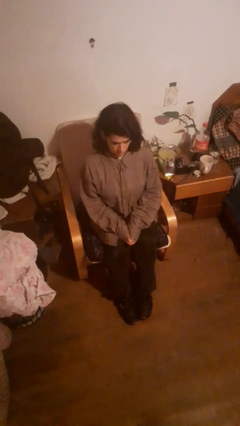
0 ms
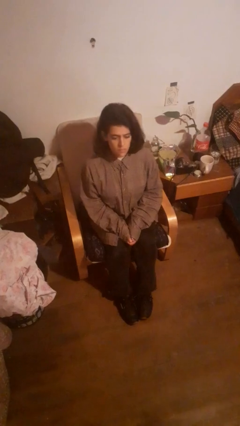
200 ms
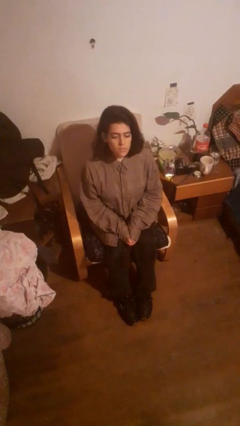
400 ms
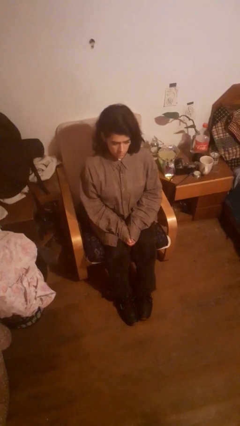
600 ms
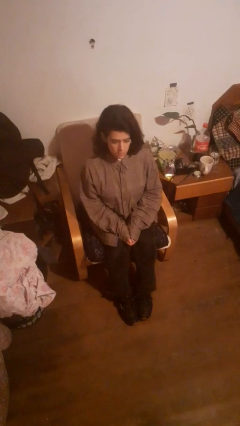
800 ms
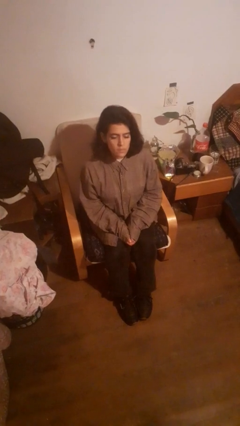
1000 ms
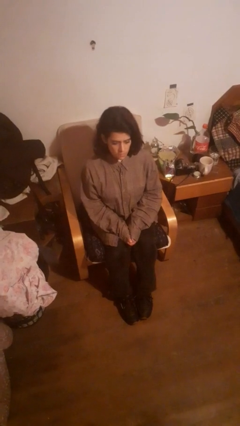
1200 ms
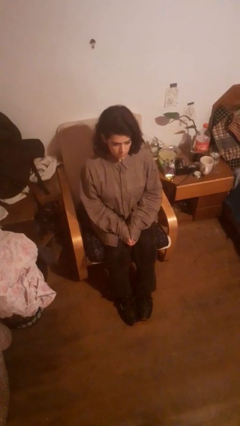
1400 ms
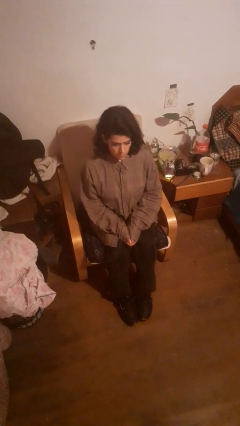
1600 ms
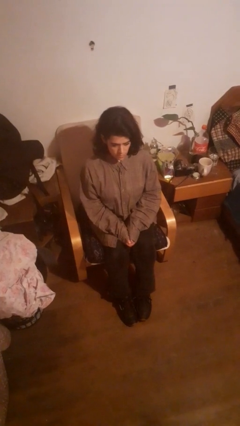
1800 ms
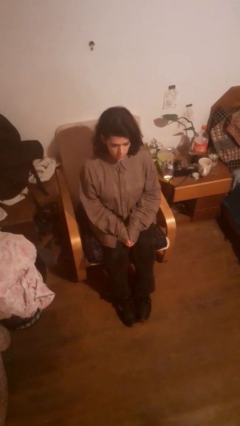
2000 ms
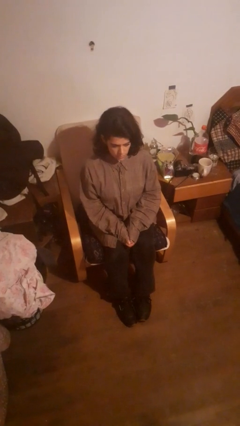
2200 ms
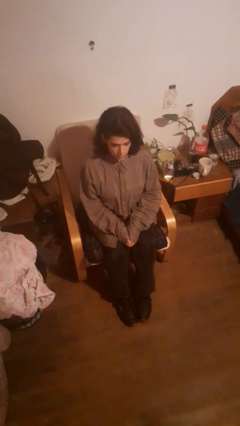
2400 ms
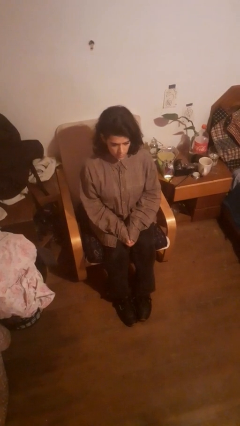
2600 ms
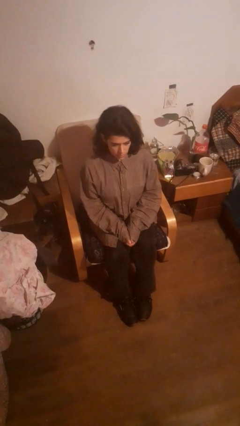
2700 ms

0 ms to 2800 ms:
person nods head

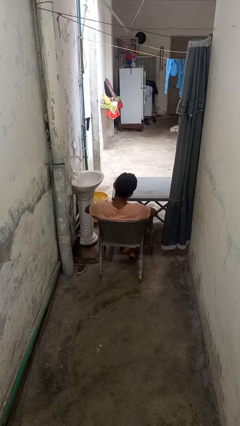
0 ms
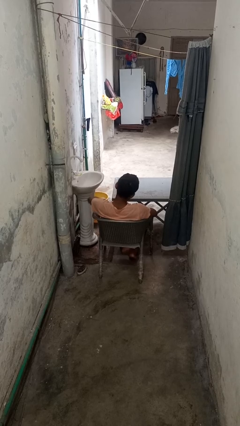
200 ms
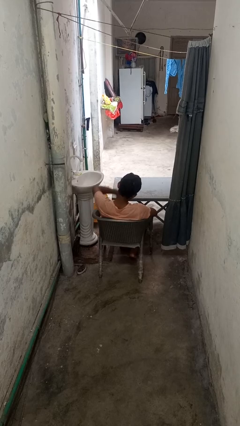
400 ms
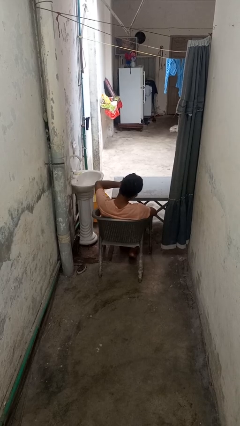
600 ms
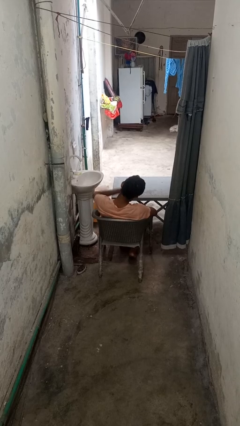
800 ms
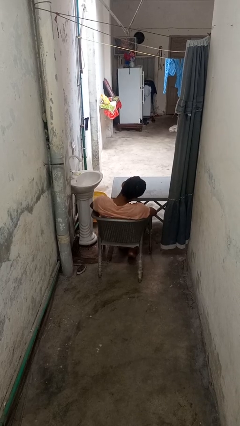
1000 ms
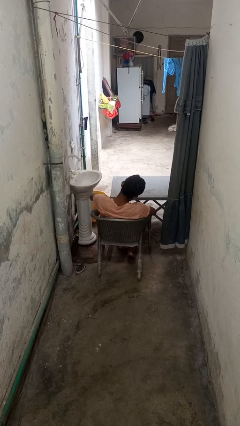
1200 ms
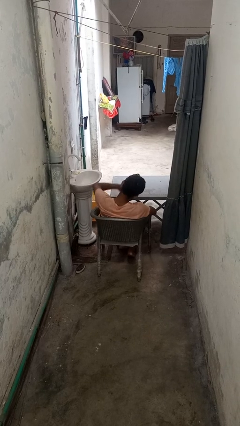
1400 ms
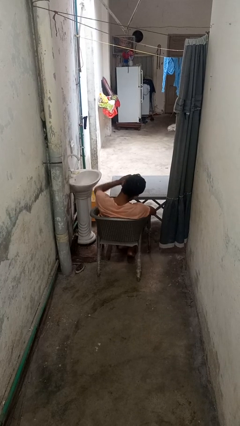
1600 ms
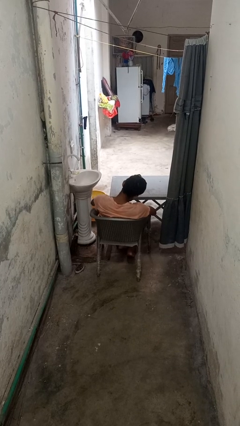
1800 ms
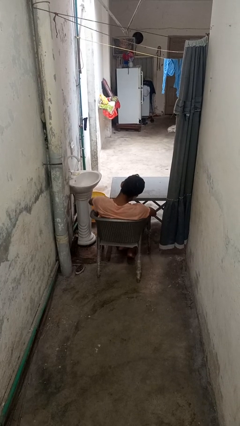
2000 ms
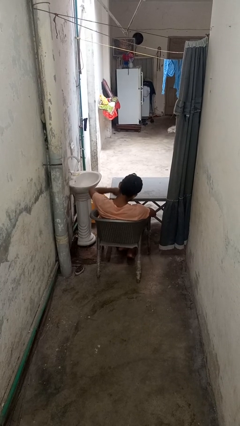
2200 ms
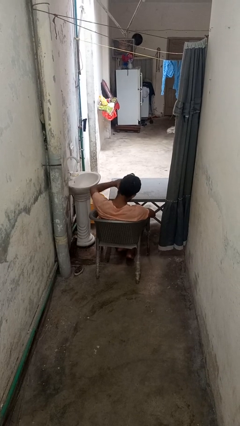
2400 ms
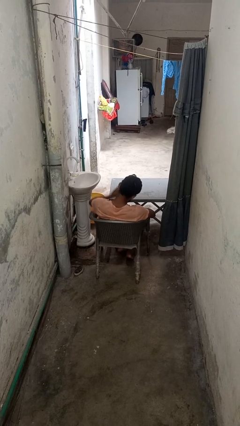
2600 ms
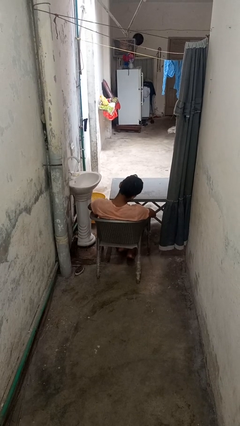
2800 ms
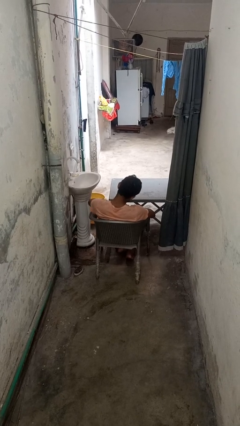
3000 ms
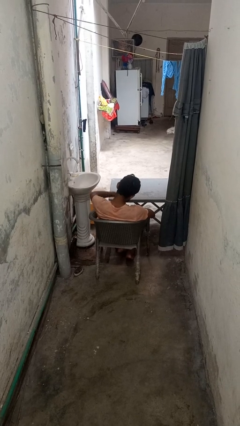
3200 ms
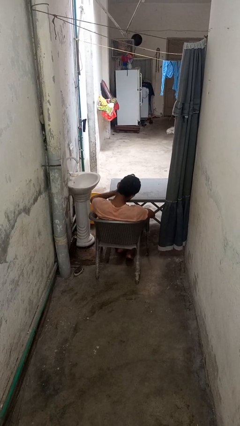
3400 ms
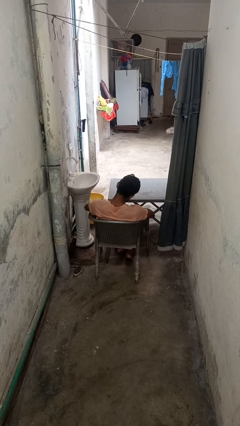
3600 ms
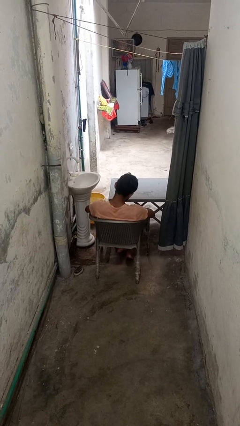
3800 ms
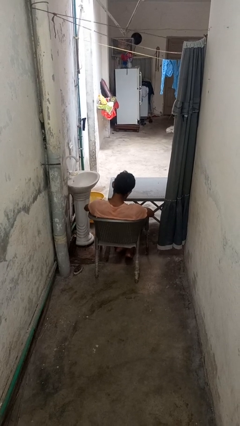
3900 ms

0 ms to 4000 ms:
person slaps hands on thighs

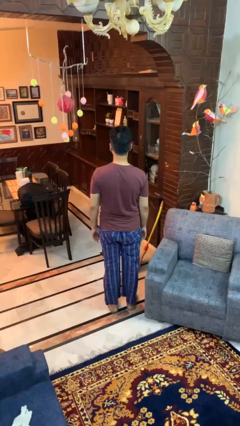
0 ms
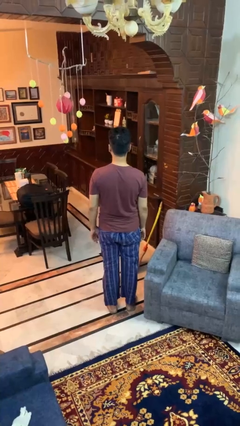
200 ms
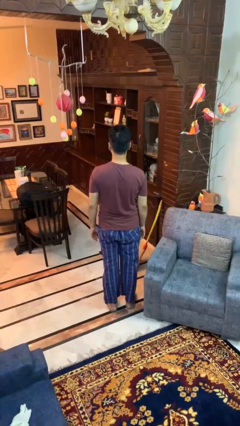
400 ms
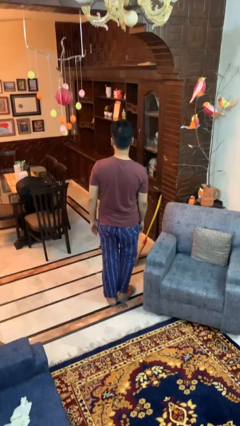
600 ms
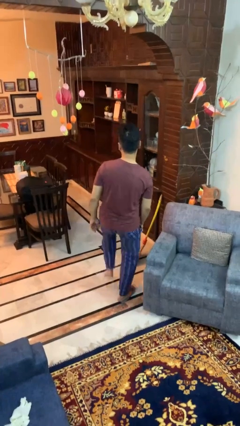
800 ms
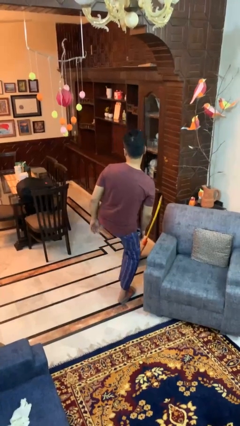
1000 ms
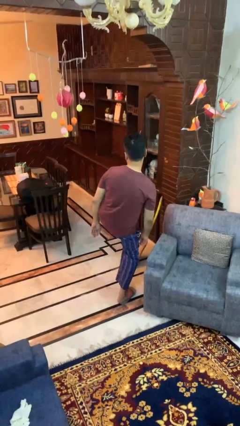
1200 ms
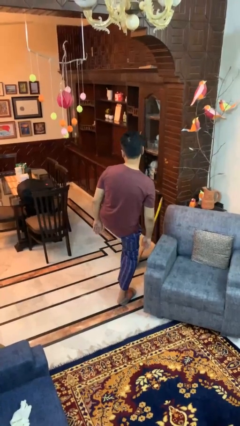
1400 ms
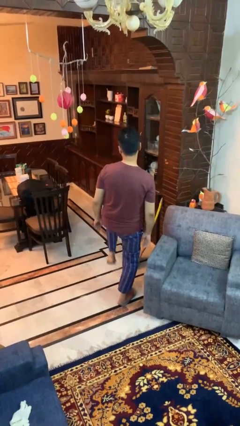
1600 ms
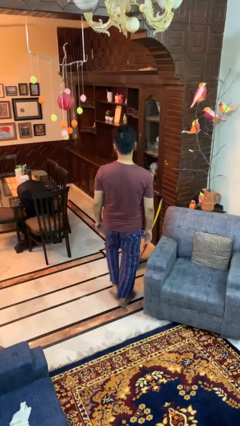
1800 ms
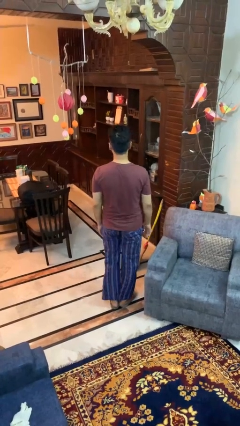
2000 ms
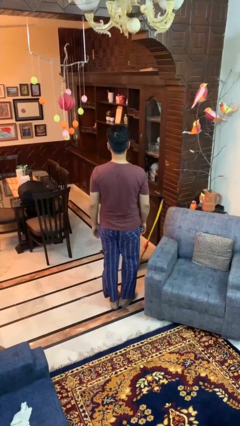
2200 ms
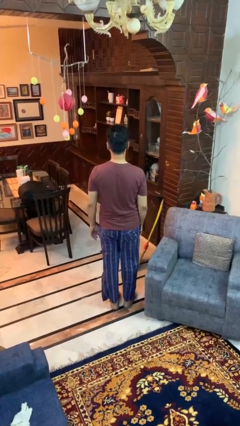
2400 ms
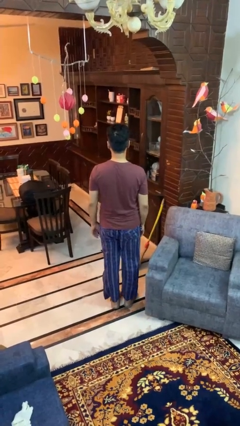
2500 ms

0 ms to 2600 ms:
person karate kicks

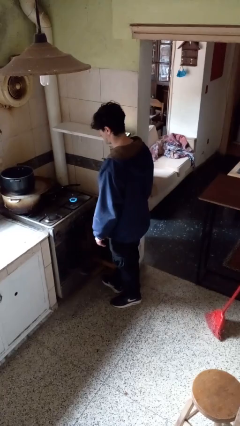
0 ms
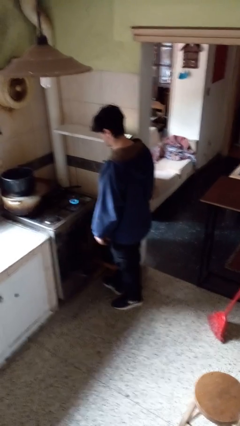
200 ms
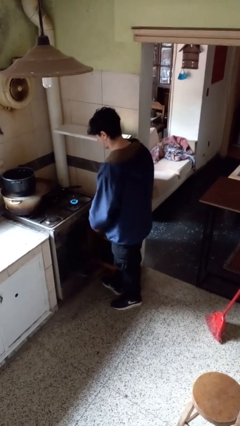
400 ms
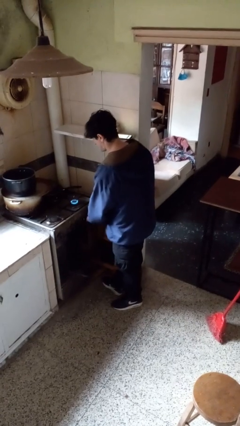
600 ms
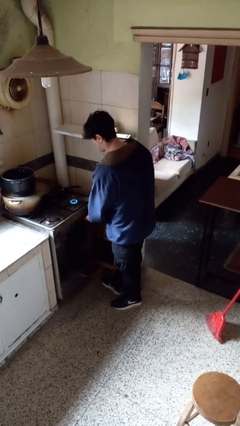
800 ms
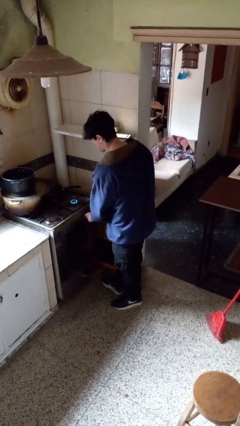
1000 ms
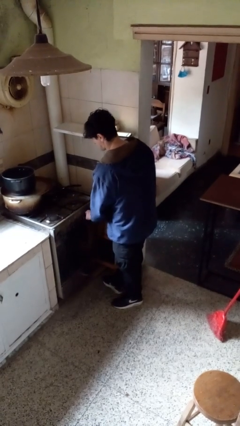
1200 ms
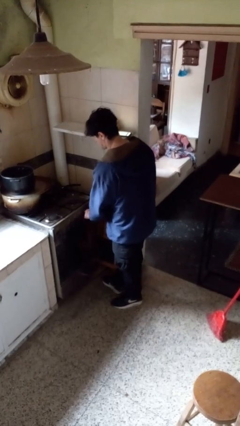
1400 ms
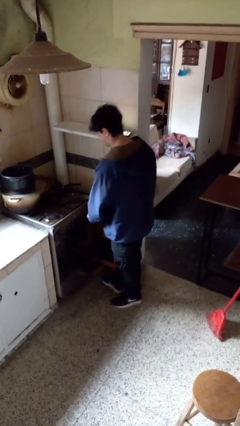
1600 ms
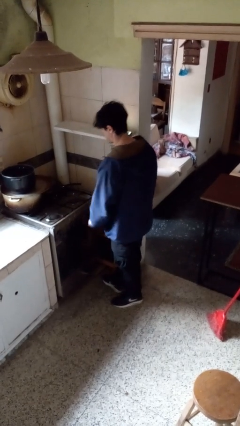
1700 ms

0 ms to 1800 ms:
person turns off stovetop

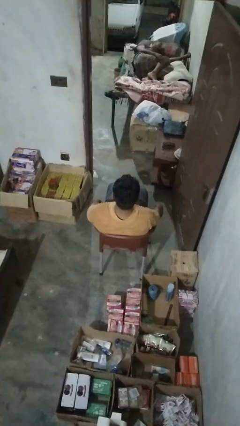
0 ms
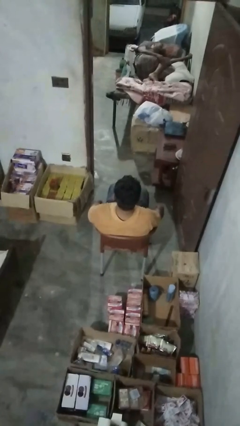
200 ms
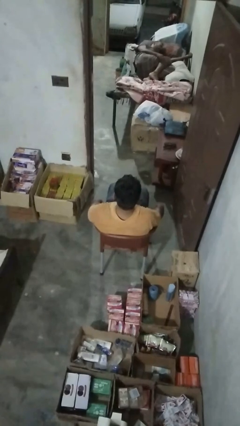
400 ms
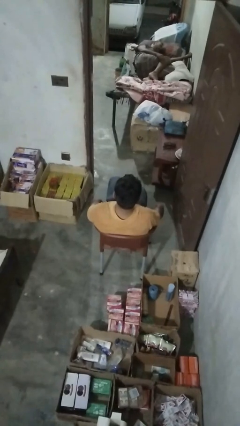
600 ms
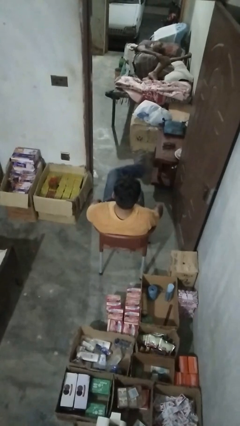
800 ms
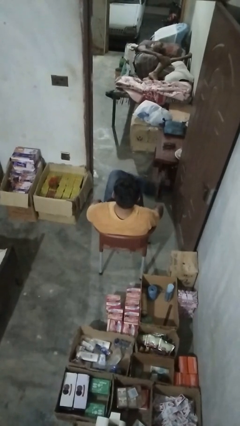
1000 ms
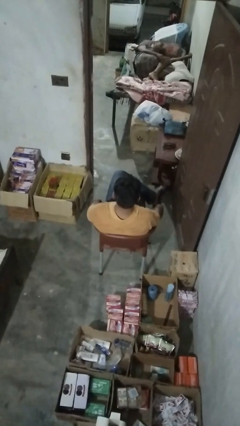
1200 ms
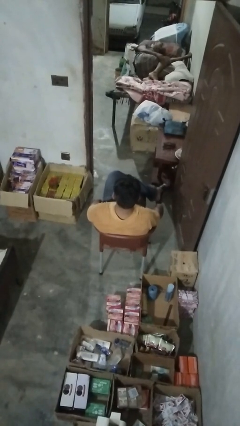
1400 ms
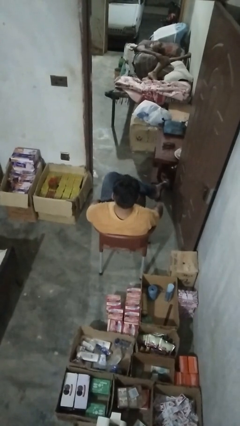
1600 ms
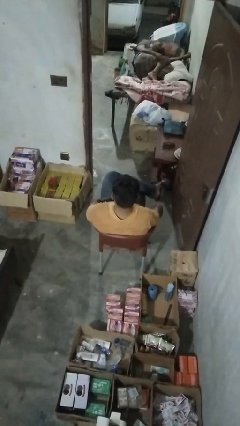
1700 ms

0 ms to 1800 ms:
person crosses legs

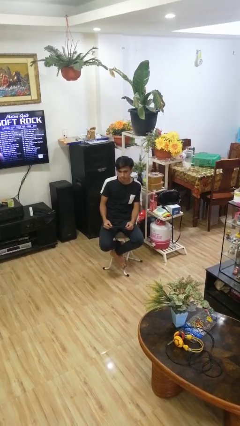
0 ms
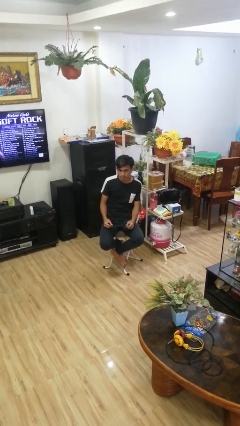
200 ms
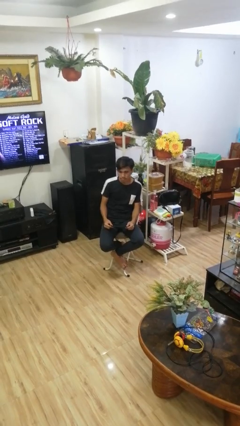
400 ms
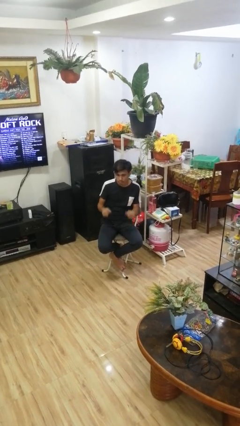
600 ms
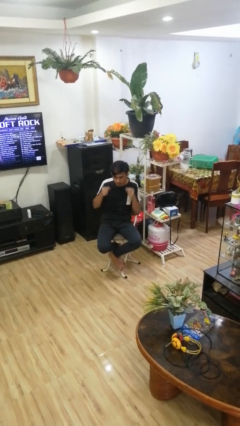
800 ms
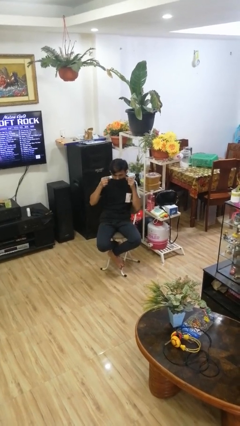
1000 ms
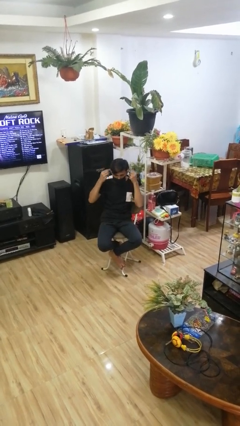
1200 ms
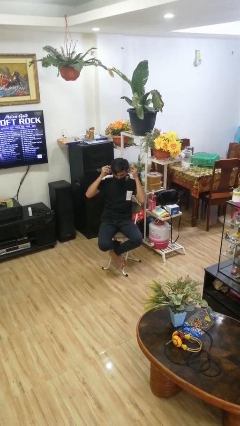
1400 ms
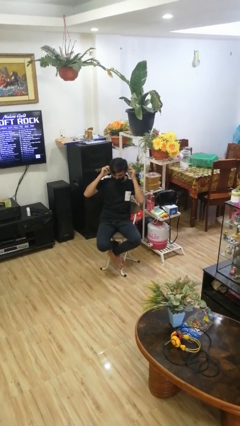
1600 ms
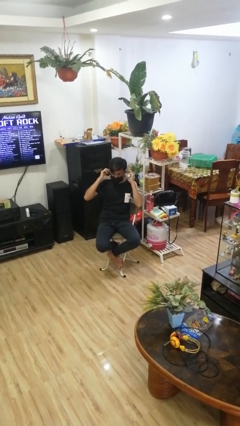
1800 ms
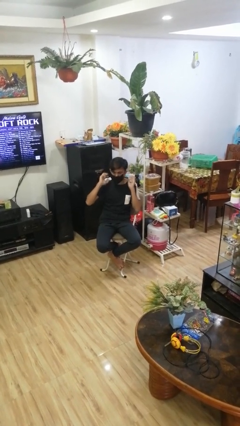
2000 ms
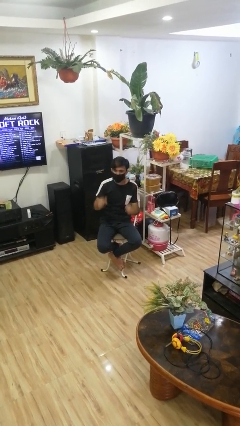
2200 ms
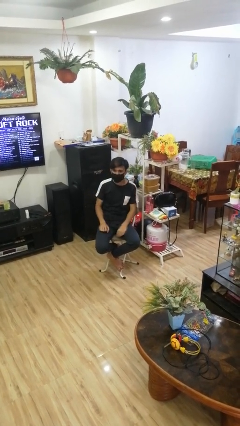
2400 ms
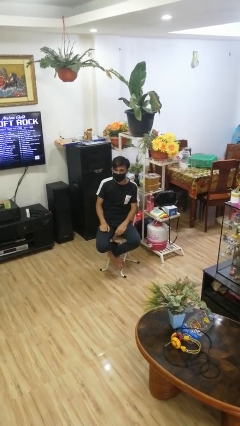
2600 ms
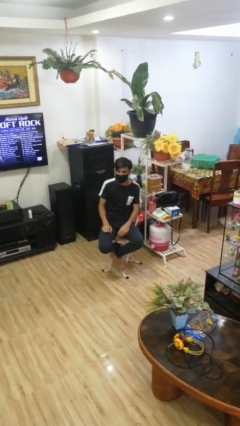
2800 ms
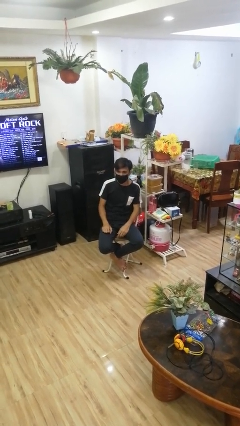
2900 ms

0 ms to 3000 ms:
person puts on facemask

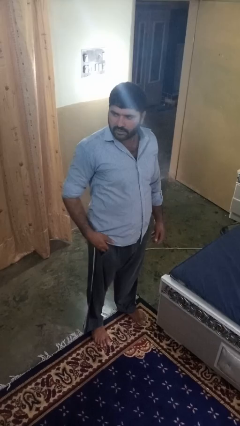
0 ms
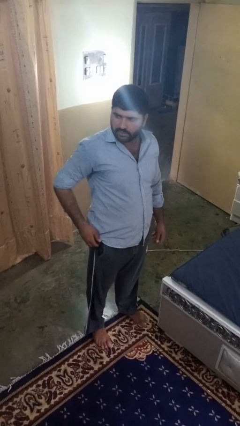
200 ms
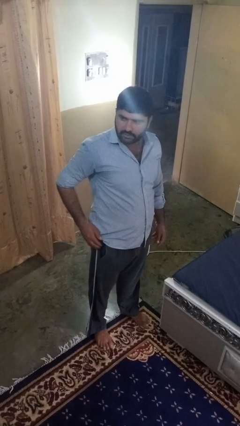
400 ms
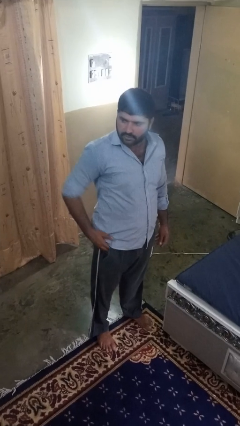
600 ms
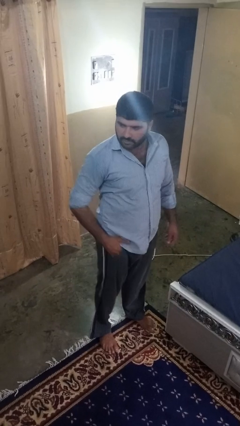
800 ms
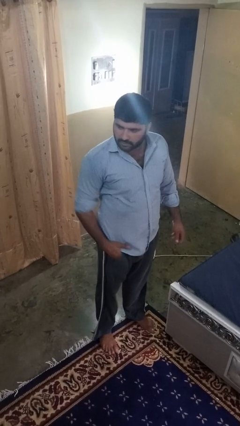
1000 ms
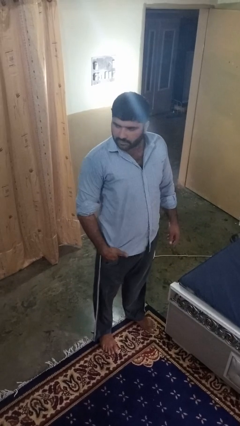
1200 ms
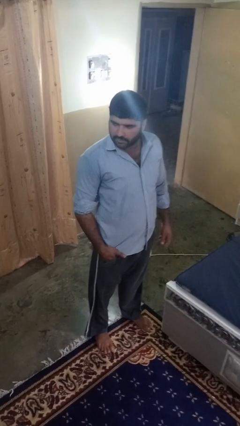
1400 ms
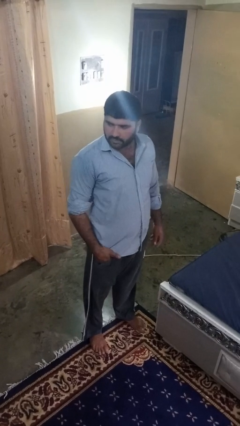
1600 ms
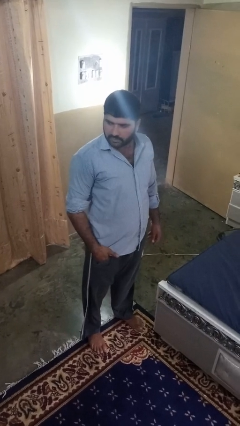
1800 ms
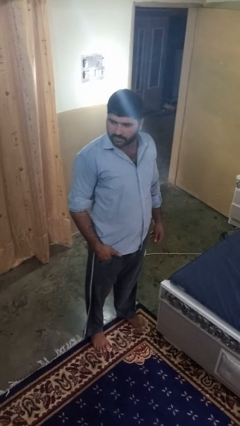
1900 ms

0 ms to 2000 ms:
person puts hands in back pockets
